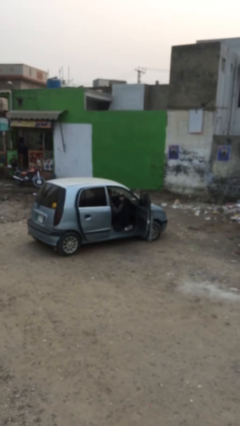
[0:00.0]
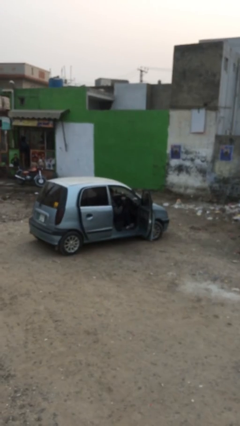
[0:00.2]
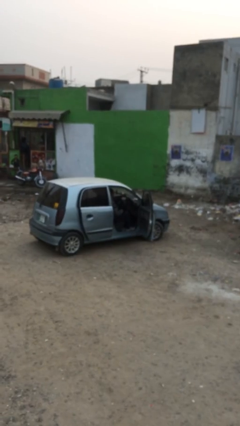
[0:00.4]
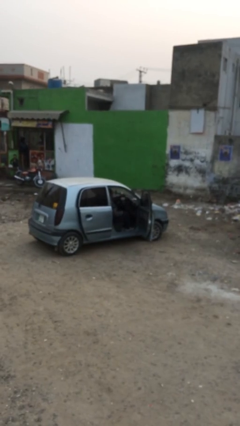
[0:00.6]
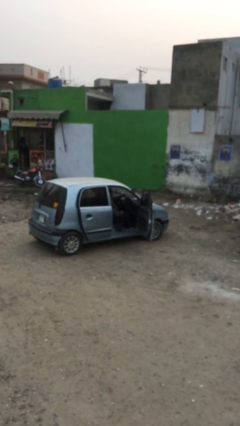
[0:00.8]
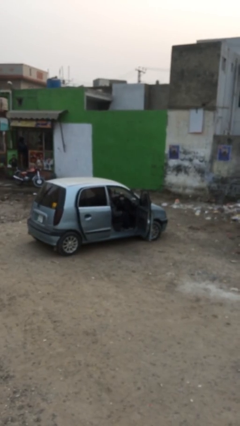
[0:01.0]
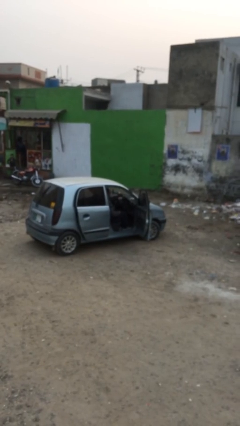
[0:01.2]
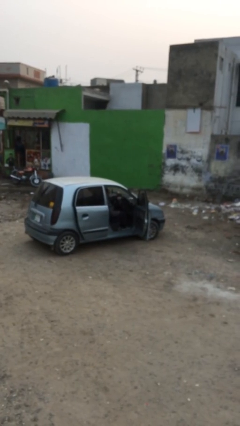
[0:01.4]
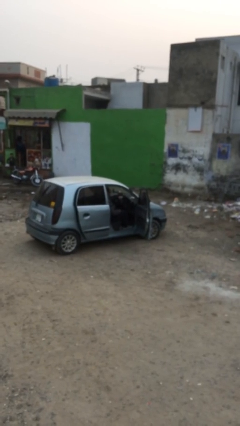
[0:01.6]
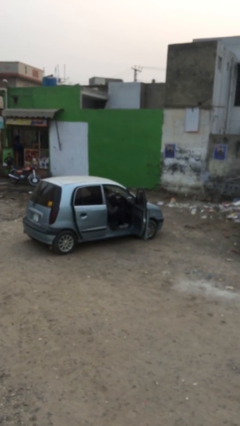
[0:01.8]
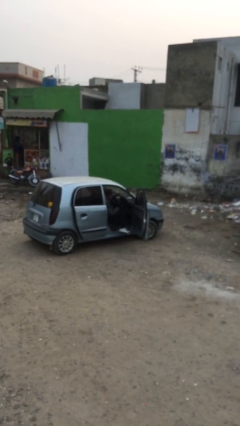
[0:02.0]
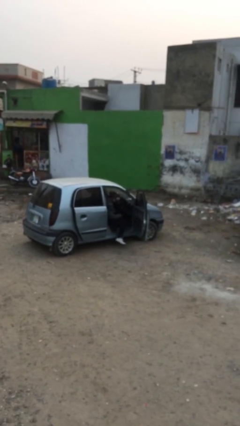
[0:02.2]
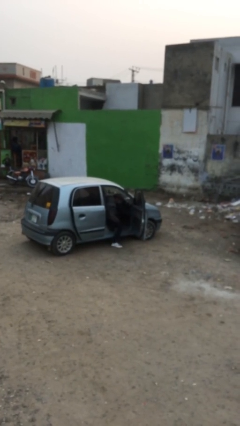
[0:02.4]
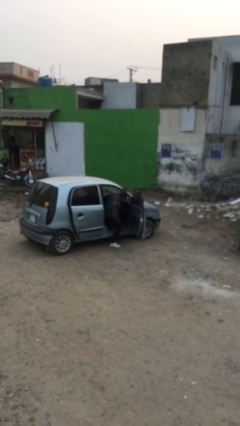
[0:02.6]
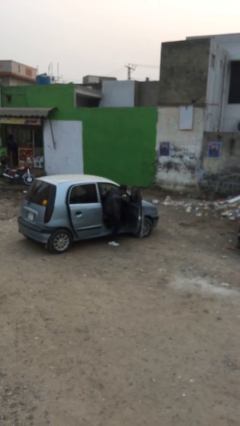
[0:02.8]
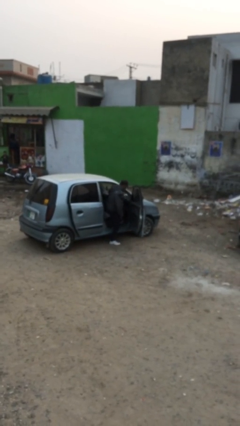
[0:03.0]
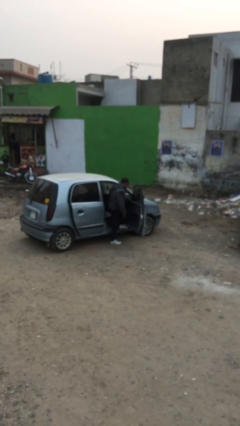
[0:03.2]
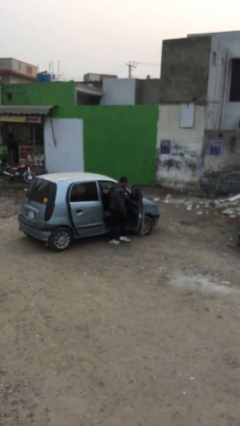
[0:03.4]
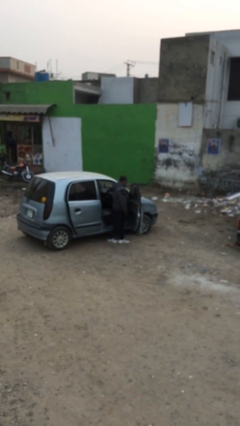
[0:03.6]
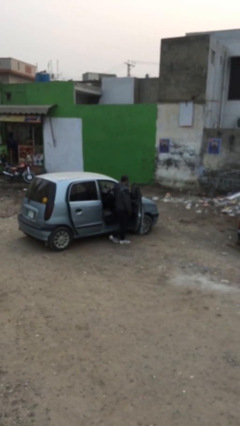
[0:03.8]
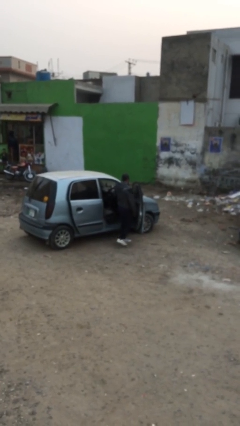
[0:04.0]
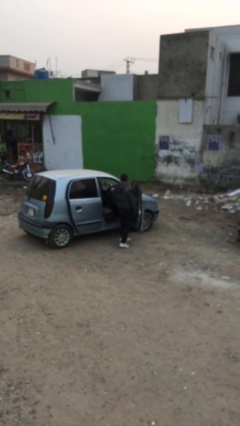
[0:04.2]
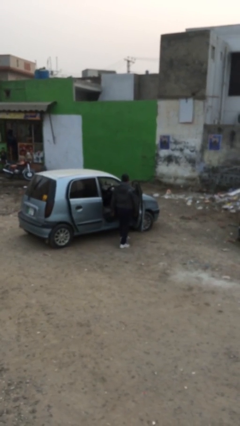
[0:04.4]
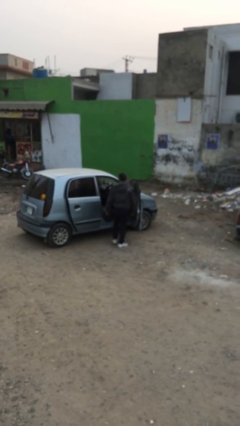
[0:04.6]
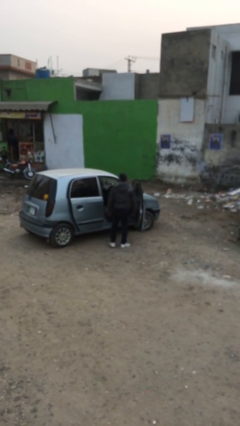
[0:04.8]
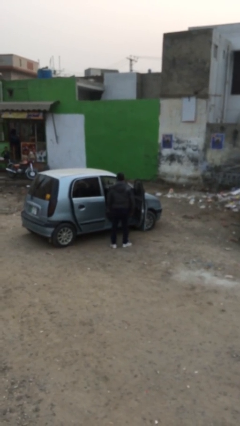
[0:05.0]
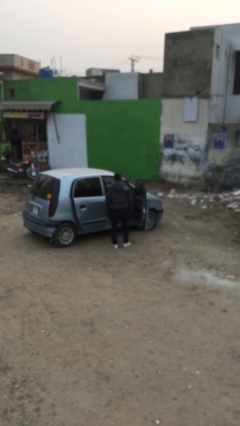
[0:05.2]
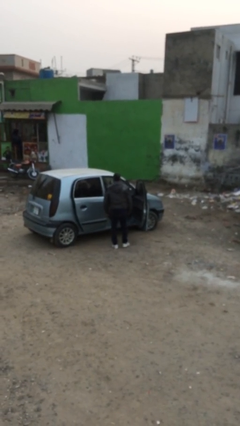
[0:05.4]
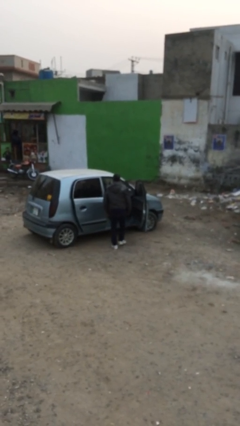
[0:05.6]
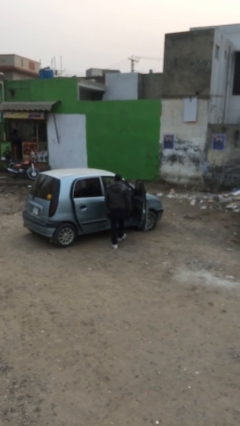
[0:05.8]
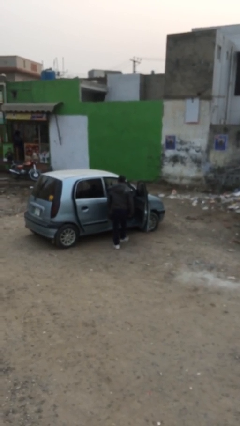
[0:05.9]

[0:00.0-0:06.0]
person exits car

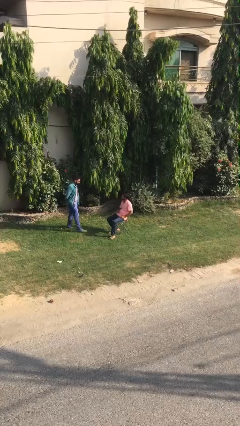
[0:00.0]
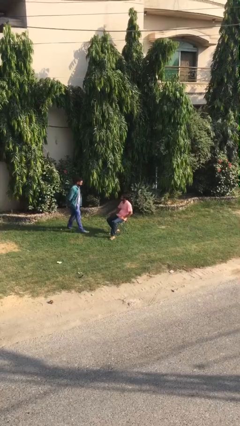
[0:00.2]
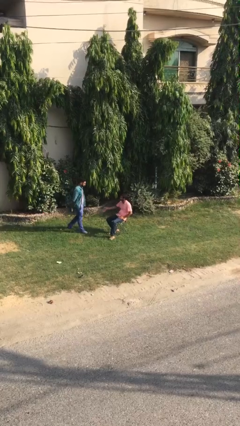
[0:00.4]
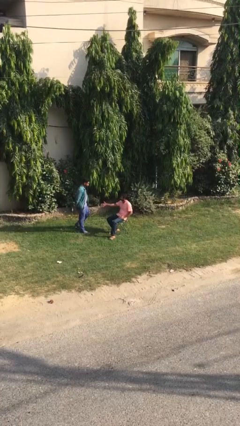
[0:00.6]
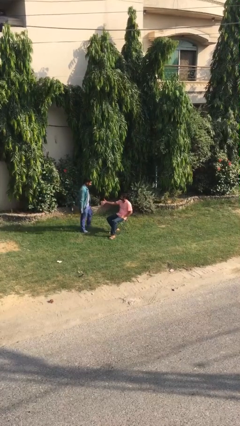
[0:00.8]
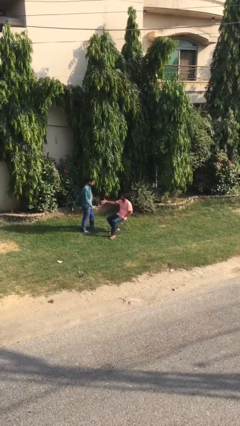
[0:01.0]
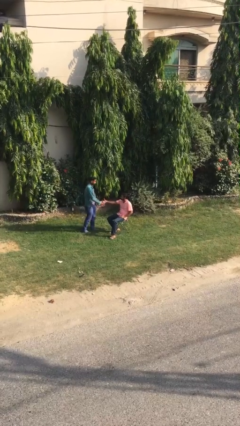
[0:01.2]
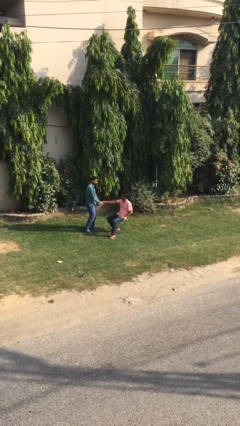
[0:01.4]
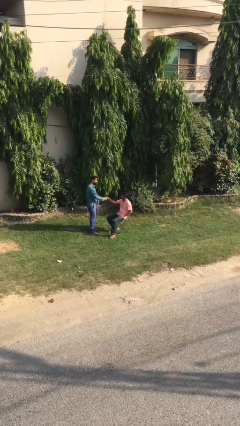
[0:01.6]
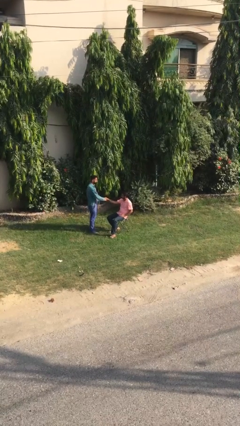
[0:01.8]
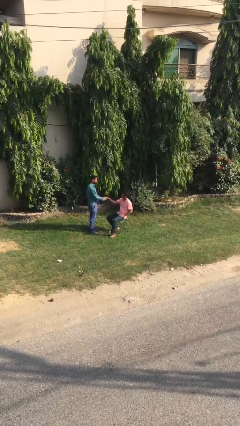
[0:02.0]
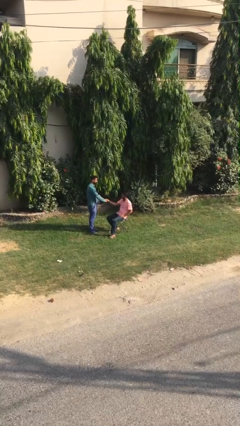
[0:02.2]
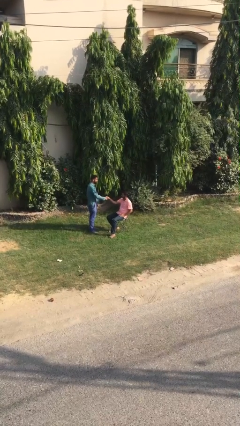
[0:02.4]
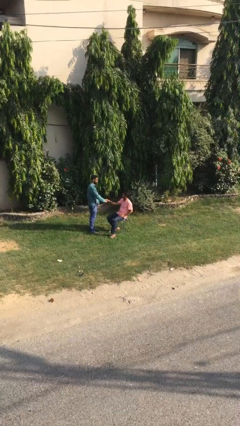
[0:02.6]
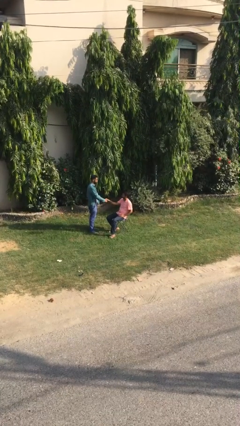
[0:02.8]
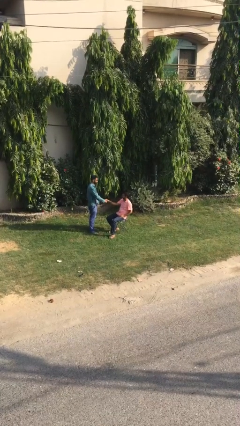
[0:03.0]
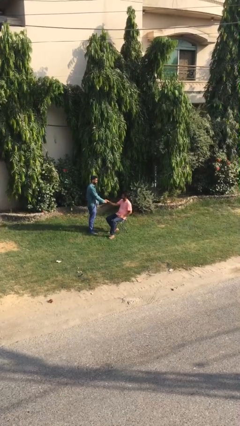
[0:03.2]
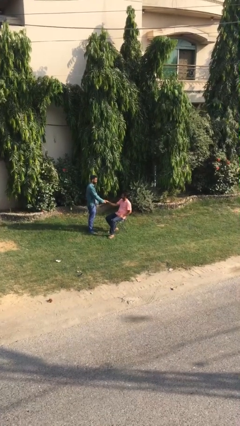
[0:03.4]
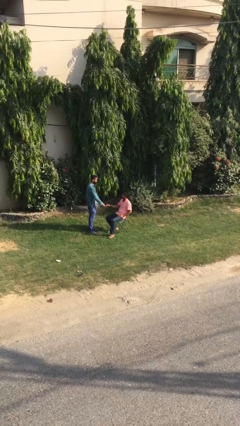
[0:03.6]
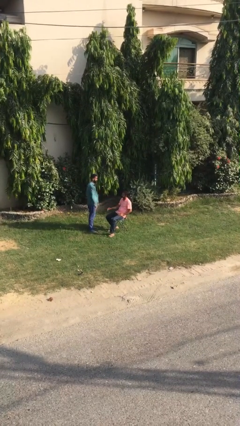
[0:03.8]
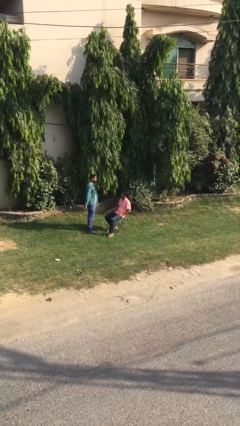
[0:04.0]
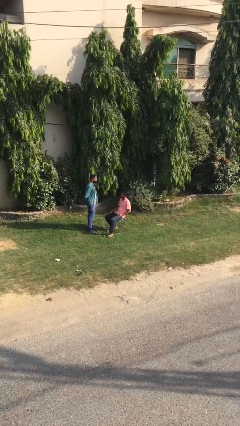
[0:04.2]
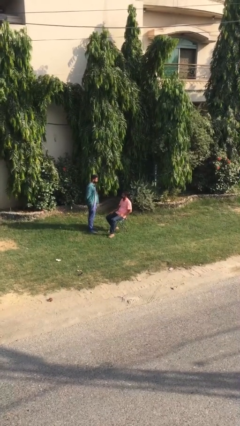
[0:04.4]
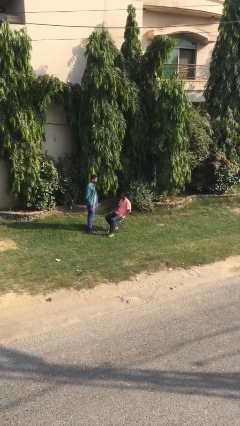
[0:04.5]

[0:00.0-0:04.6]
person shakes hand

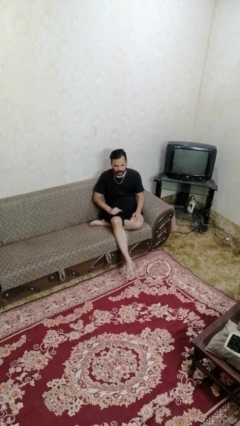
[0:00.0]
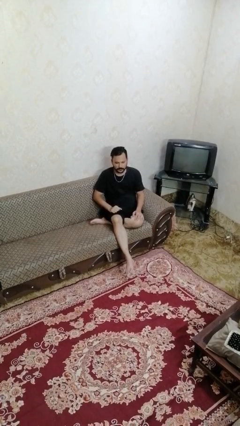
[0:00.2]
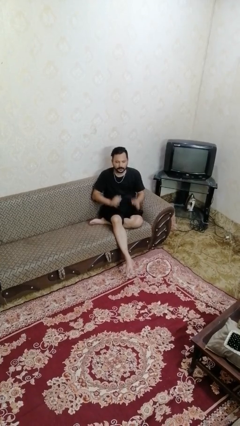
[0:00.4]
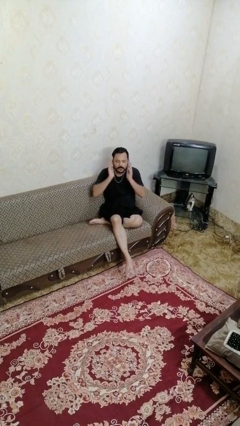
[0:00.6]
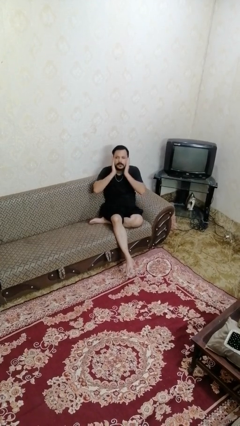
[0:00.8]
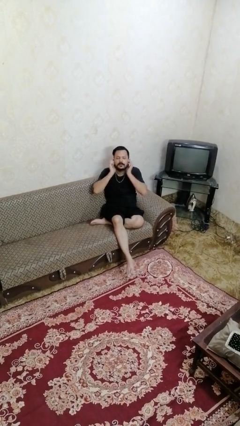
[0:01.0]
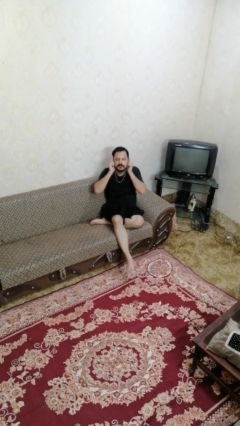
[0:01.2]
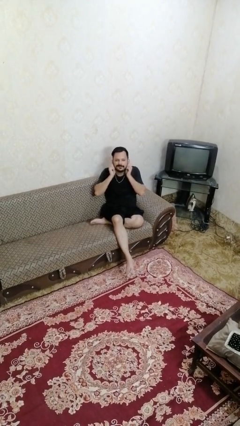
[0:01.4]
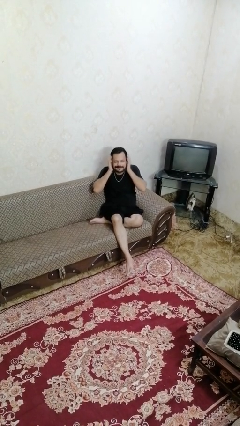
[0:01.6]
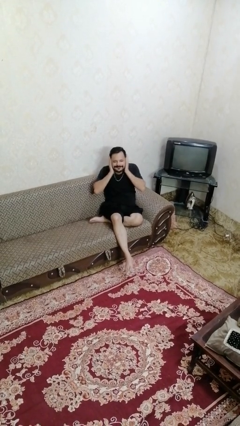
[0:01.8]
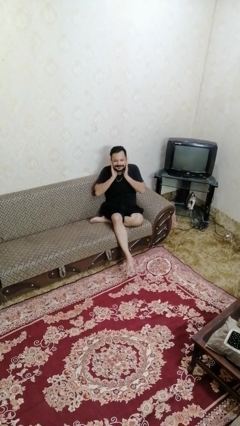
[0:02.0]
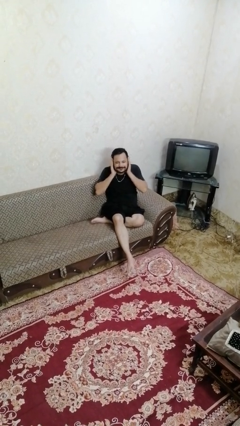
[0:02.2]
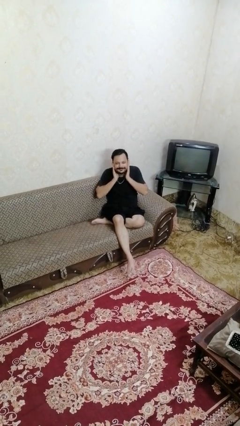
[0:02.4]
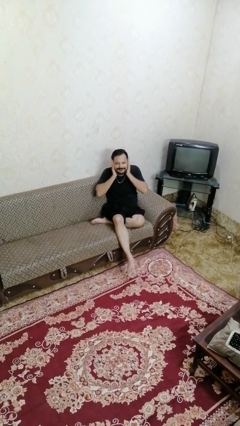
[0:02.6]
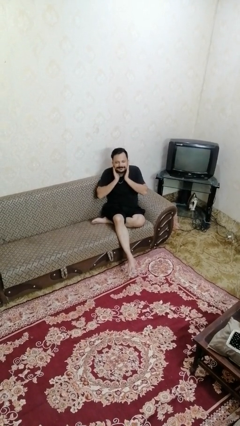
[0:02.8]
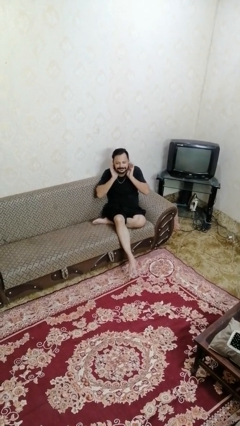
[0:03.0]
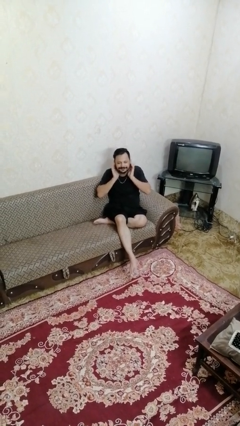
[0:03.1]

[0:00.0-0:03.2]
person touches earlobe

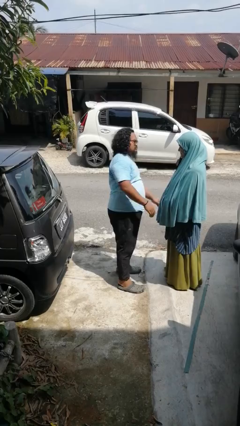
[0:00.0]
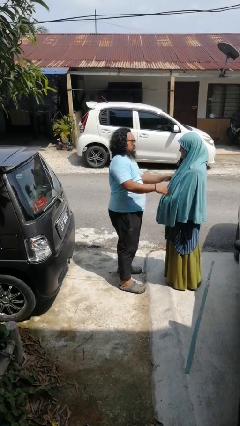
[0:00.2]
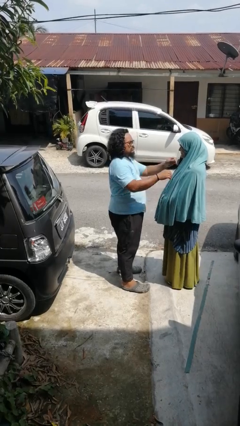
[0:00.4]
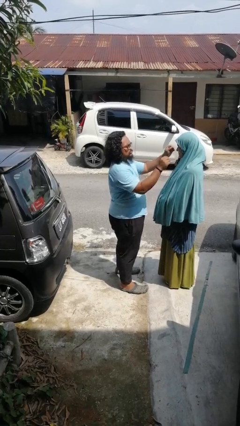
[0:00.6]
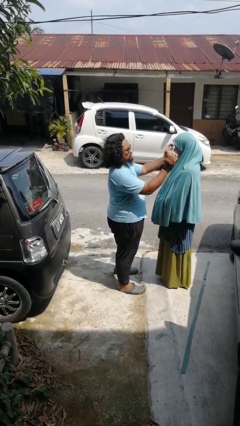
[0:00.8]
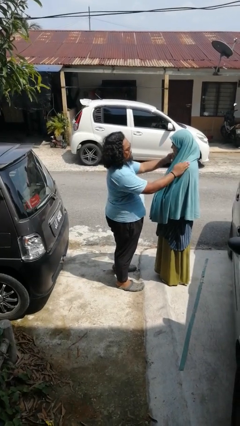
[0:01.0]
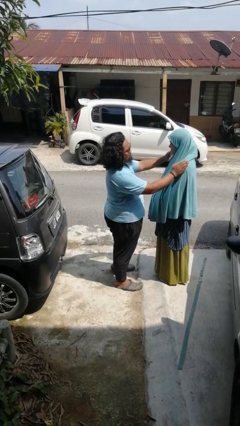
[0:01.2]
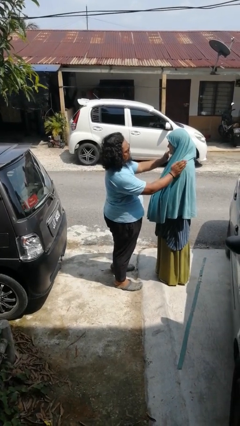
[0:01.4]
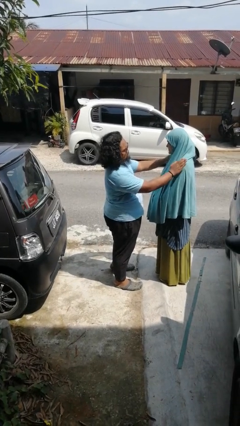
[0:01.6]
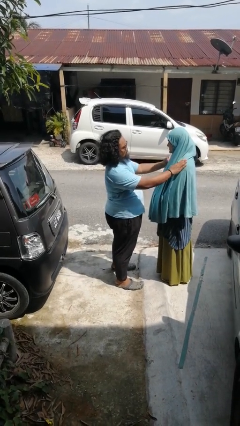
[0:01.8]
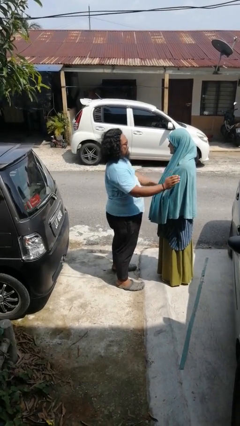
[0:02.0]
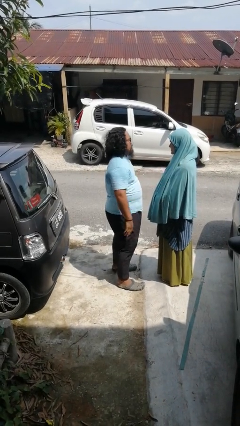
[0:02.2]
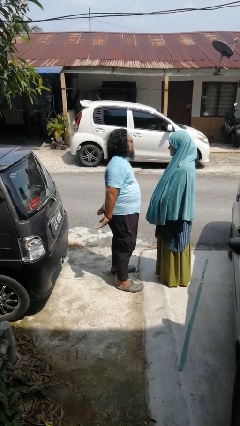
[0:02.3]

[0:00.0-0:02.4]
person pounds shoulders of person

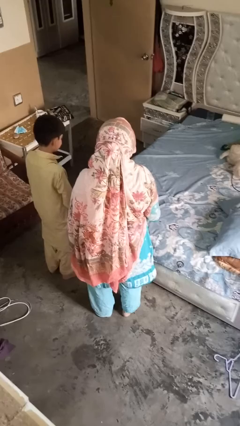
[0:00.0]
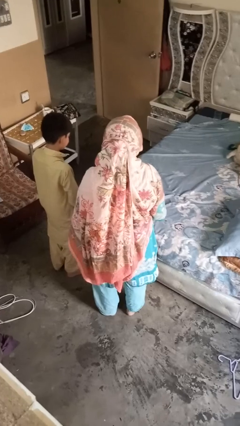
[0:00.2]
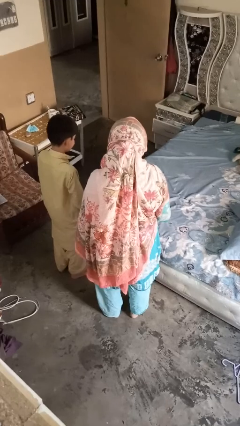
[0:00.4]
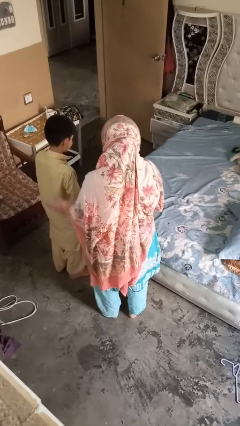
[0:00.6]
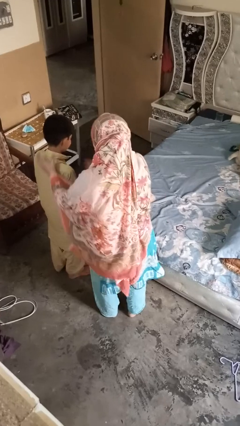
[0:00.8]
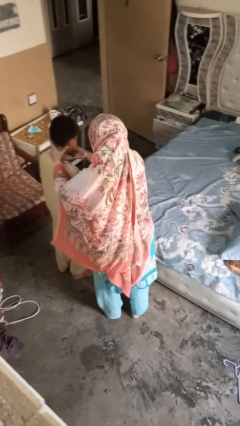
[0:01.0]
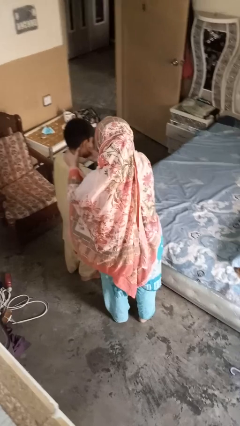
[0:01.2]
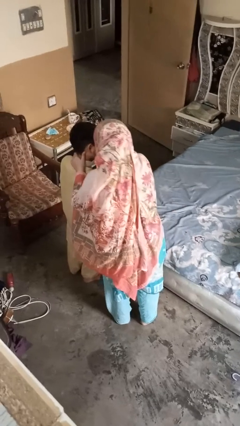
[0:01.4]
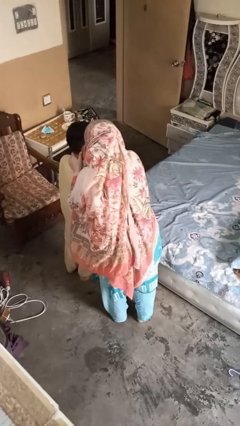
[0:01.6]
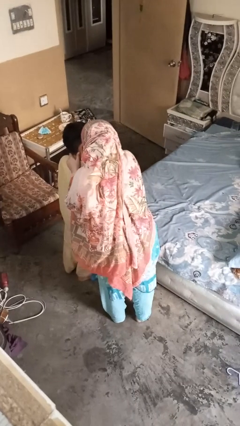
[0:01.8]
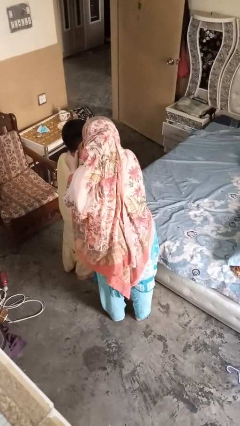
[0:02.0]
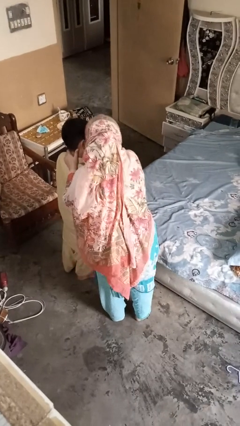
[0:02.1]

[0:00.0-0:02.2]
person gestures blow kiss
